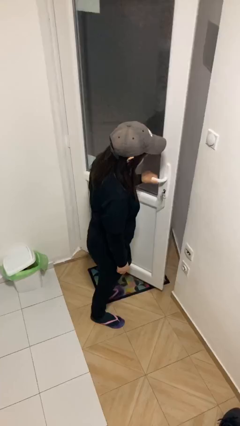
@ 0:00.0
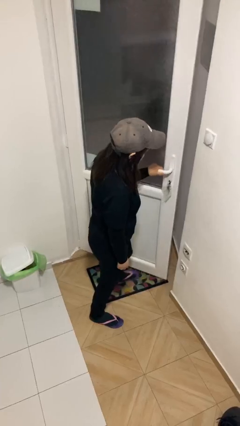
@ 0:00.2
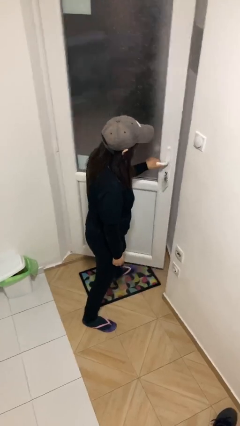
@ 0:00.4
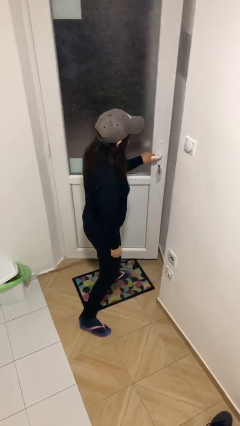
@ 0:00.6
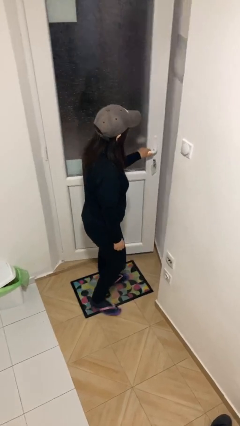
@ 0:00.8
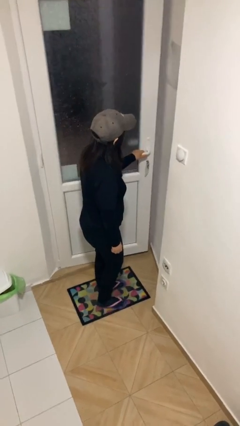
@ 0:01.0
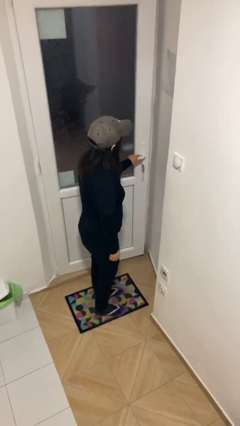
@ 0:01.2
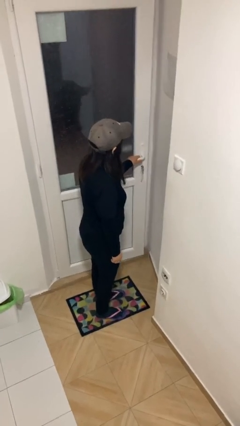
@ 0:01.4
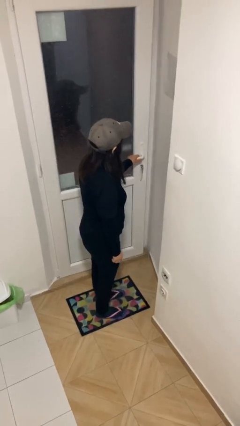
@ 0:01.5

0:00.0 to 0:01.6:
person closes facility door

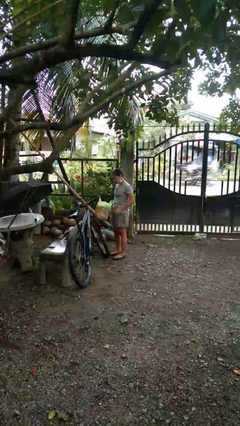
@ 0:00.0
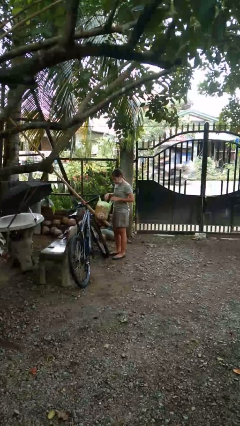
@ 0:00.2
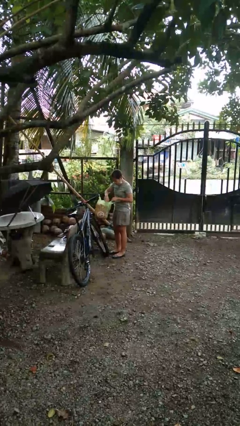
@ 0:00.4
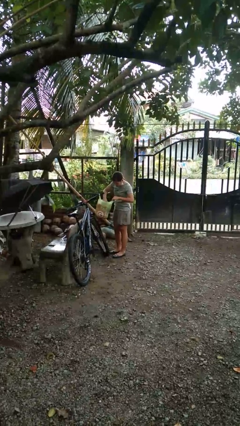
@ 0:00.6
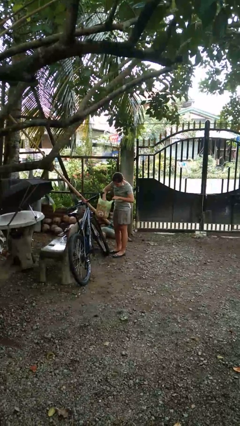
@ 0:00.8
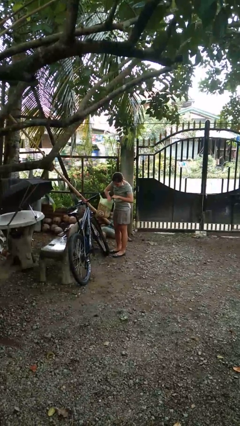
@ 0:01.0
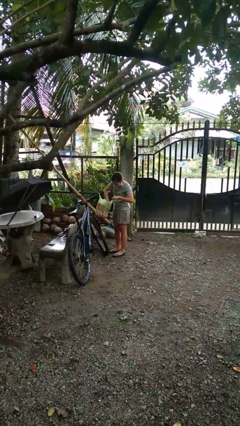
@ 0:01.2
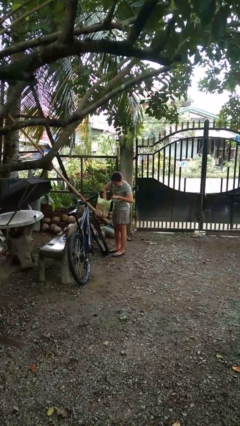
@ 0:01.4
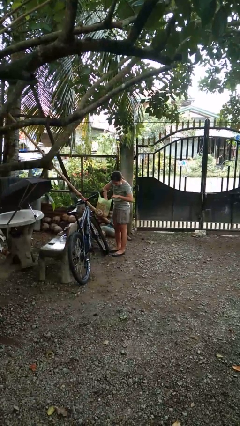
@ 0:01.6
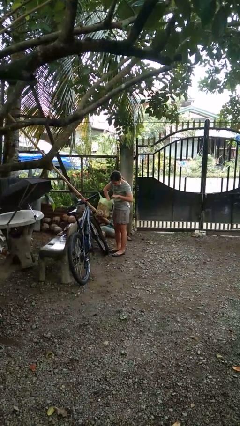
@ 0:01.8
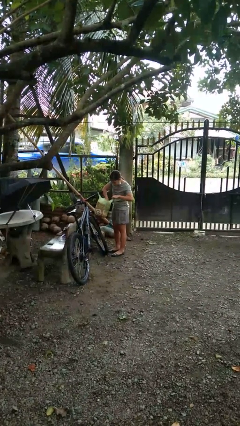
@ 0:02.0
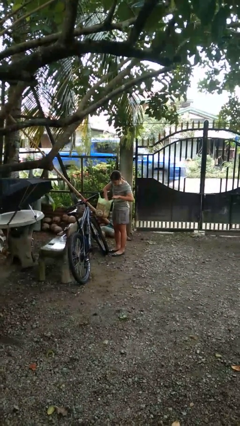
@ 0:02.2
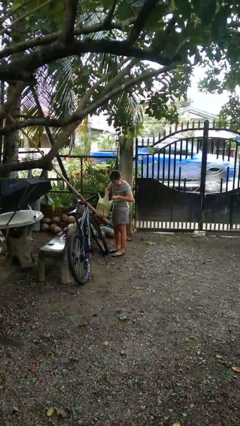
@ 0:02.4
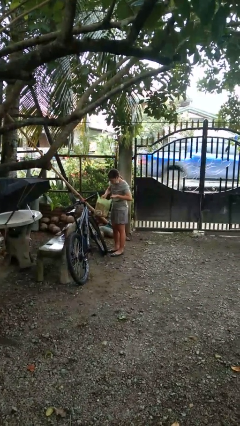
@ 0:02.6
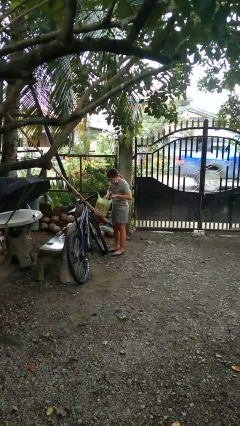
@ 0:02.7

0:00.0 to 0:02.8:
person searches in bag

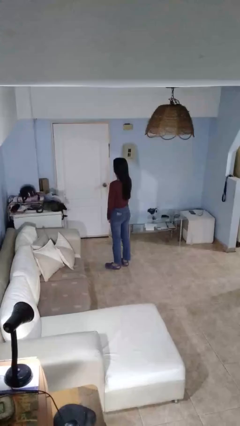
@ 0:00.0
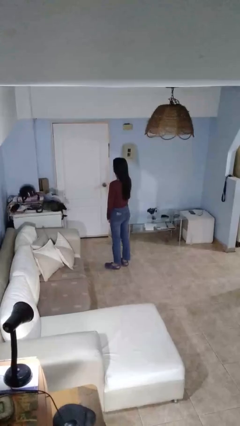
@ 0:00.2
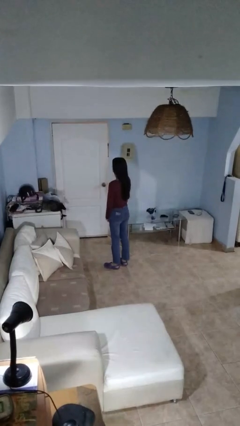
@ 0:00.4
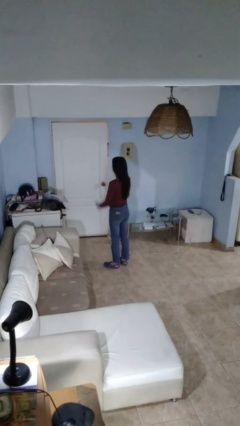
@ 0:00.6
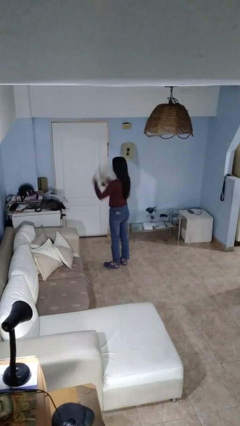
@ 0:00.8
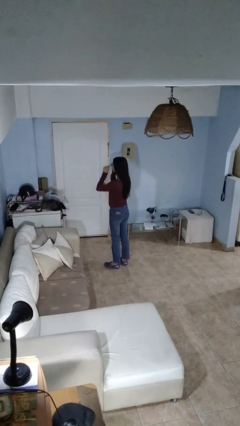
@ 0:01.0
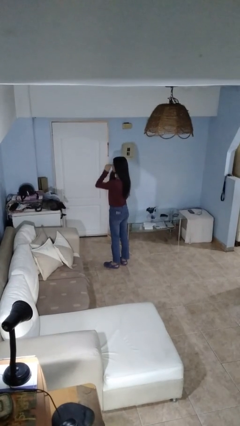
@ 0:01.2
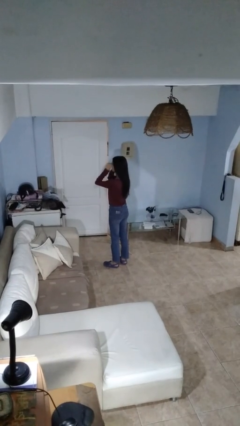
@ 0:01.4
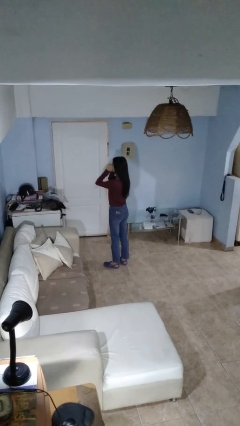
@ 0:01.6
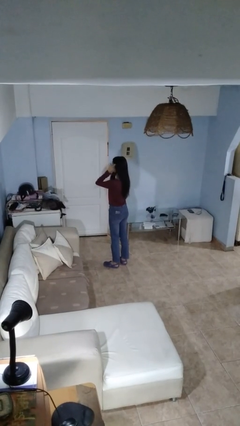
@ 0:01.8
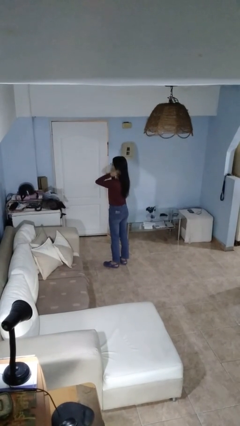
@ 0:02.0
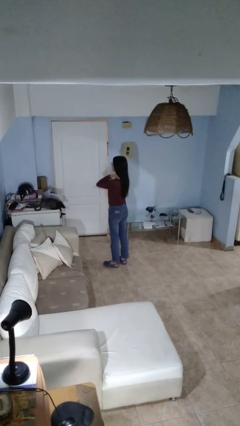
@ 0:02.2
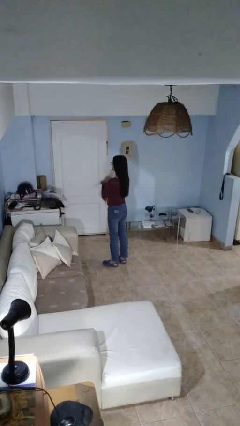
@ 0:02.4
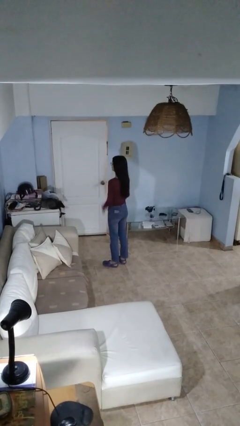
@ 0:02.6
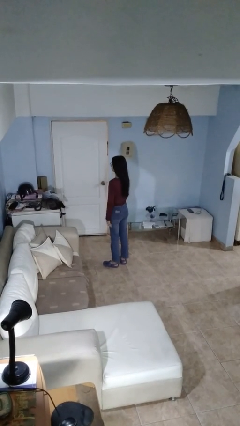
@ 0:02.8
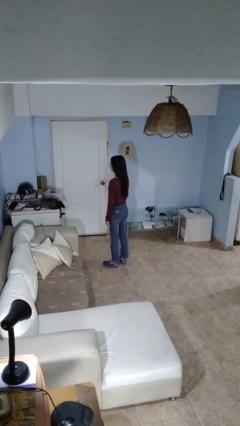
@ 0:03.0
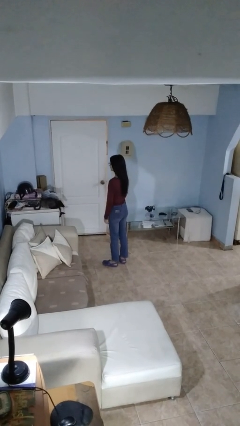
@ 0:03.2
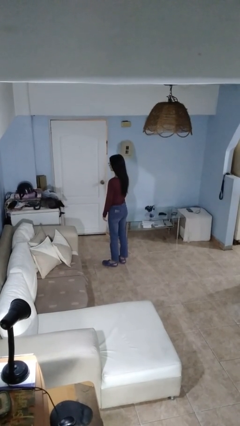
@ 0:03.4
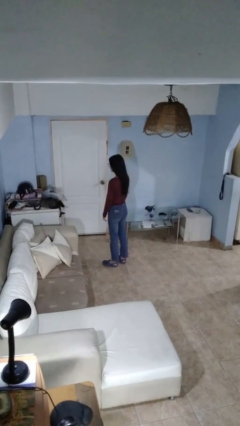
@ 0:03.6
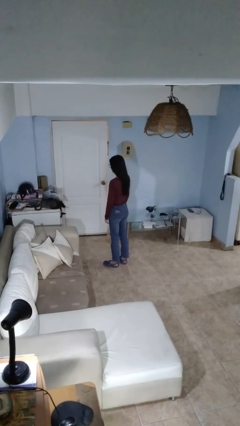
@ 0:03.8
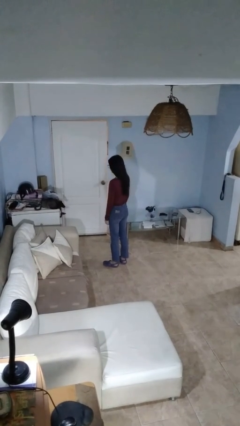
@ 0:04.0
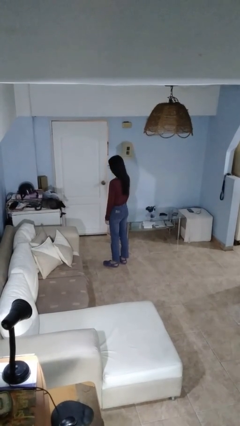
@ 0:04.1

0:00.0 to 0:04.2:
person puts on glasses

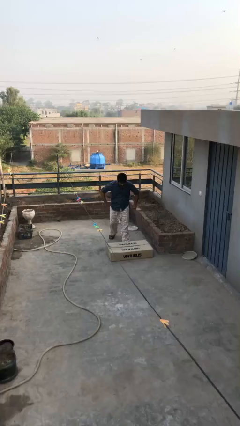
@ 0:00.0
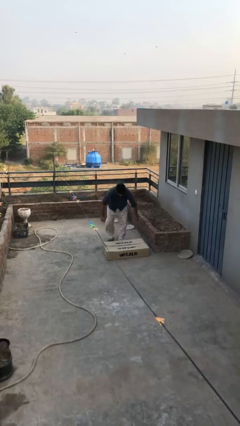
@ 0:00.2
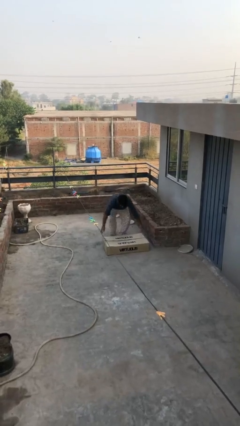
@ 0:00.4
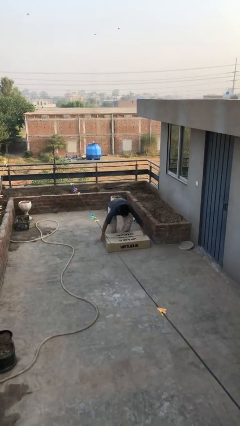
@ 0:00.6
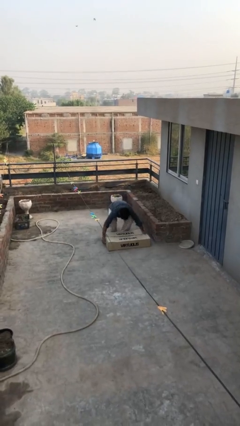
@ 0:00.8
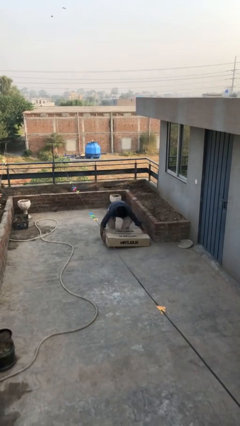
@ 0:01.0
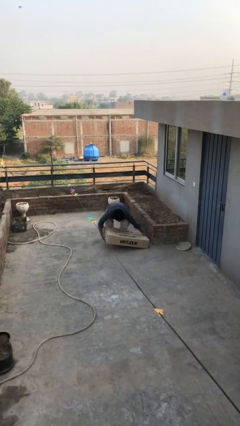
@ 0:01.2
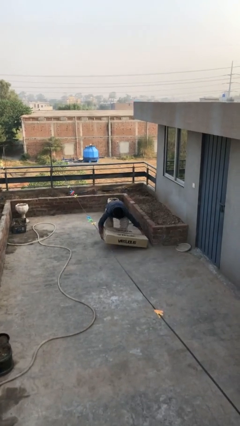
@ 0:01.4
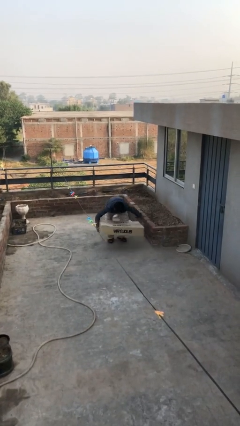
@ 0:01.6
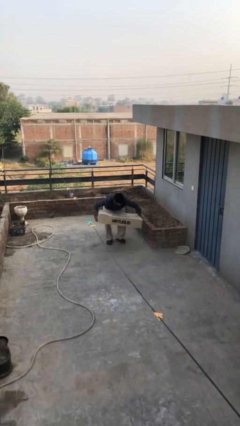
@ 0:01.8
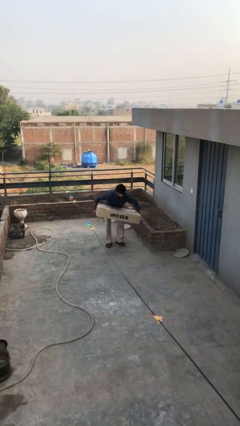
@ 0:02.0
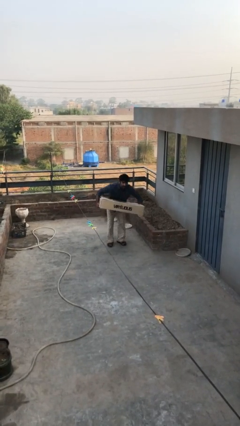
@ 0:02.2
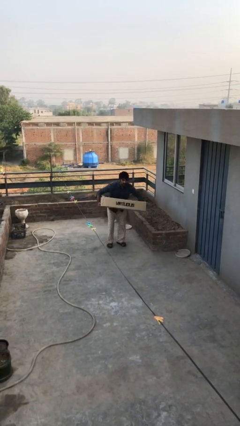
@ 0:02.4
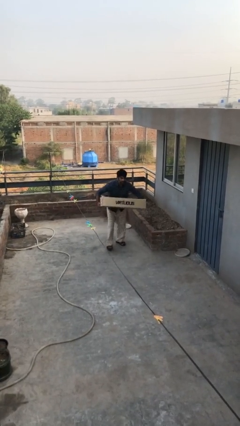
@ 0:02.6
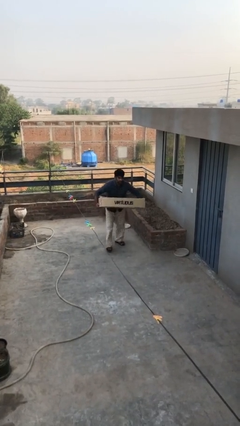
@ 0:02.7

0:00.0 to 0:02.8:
person picks up object from floor

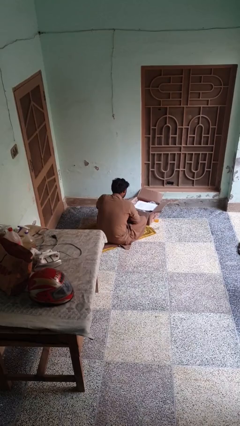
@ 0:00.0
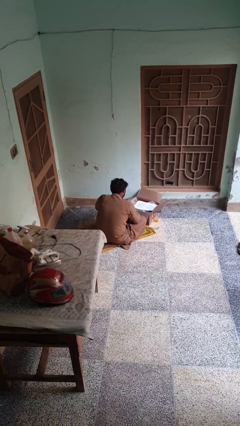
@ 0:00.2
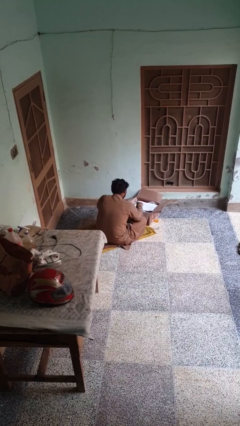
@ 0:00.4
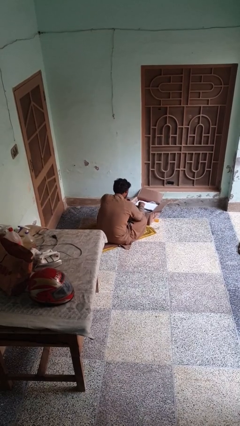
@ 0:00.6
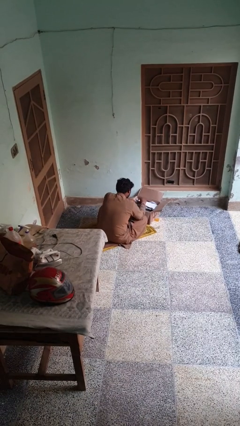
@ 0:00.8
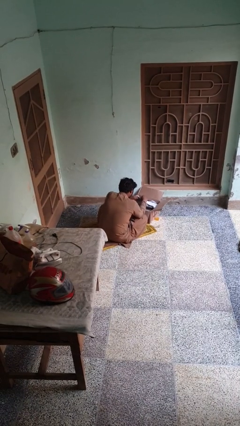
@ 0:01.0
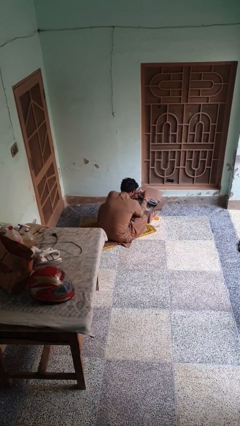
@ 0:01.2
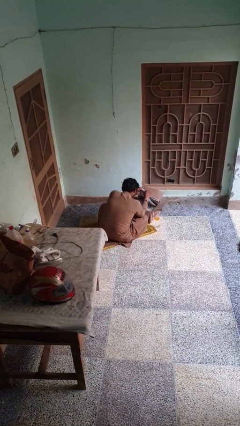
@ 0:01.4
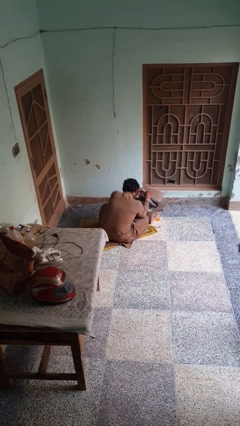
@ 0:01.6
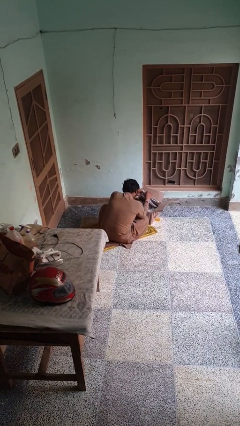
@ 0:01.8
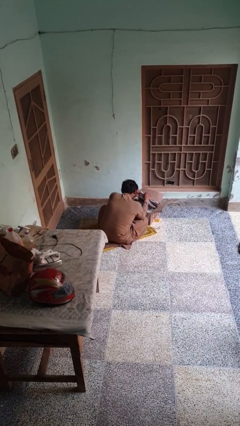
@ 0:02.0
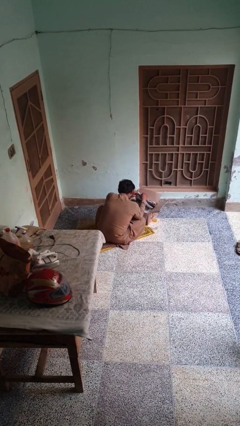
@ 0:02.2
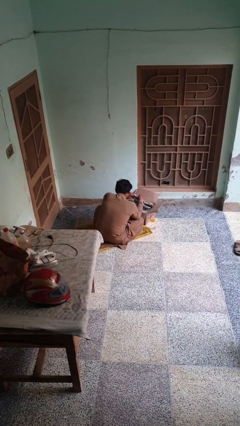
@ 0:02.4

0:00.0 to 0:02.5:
person searches in box

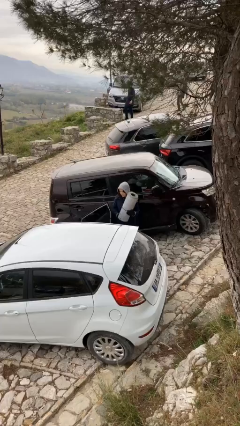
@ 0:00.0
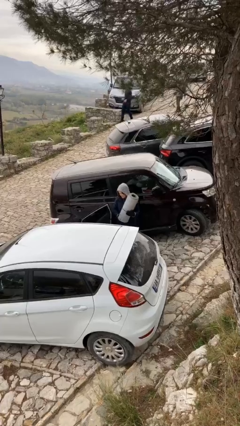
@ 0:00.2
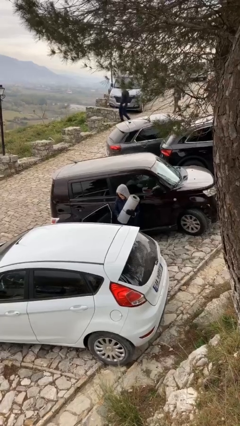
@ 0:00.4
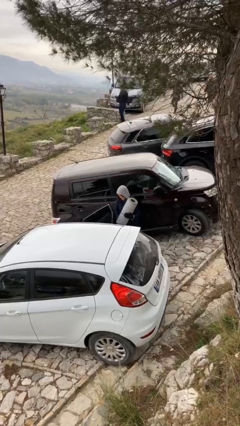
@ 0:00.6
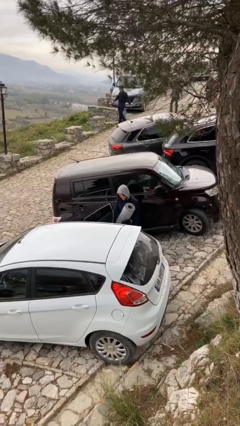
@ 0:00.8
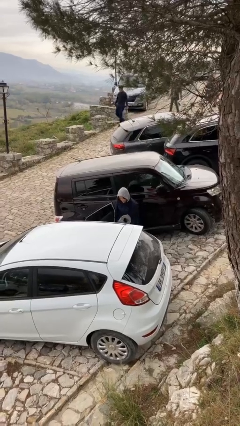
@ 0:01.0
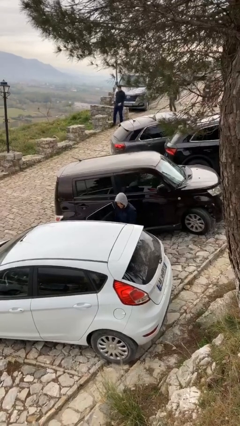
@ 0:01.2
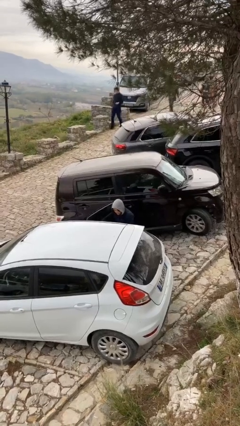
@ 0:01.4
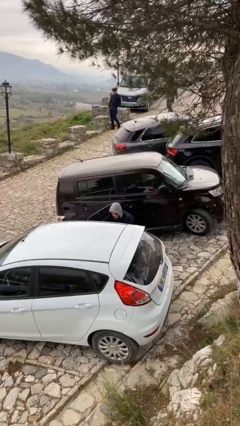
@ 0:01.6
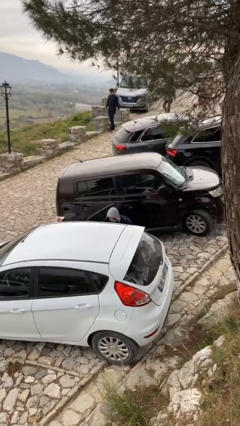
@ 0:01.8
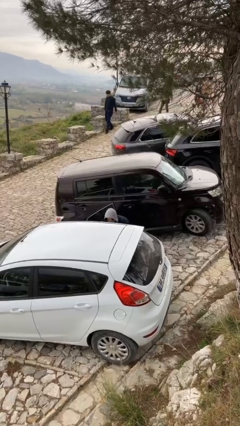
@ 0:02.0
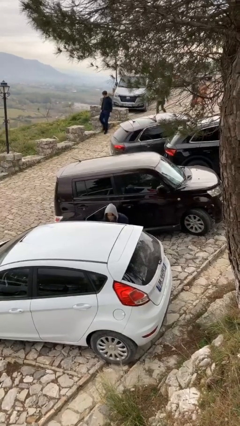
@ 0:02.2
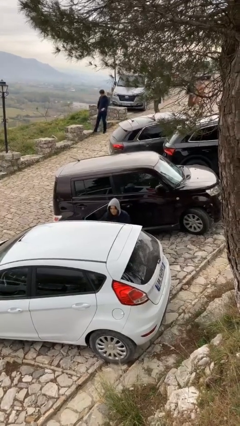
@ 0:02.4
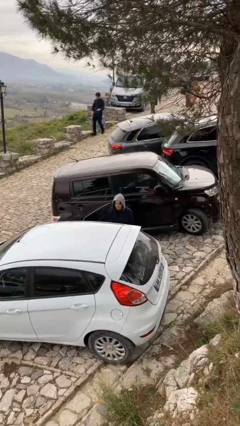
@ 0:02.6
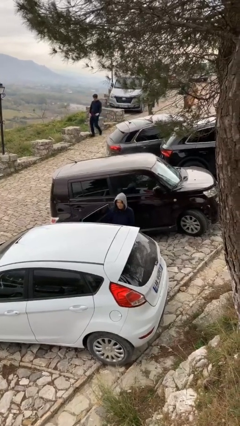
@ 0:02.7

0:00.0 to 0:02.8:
person loads car

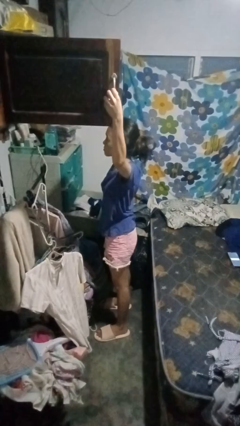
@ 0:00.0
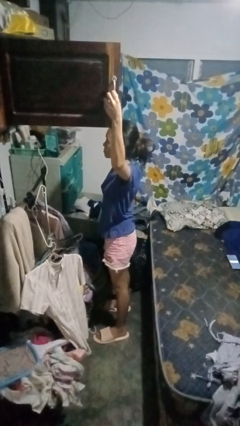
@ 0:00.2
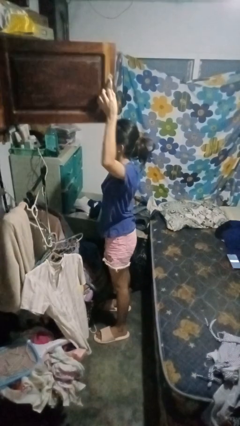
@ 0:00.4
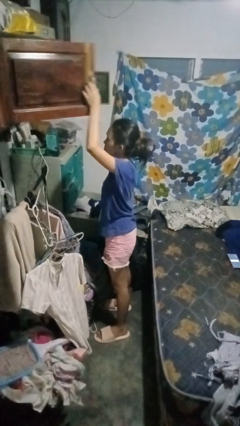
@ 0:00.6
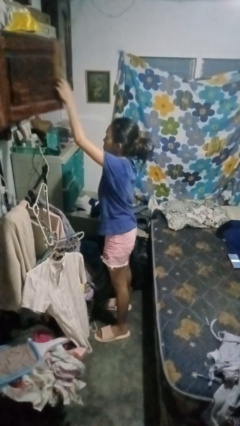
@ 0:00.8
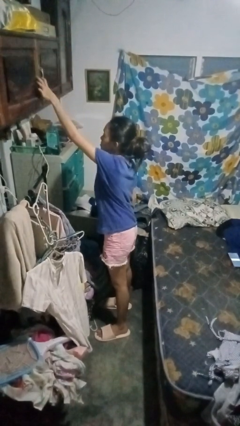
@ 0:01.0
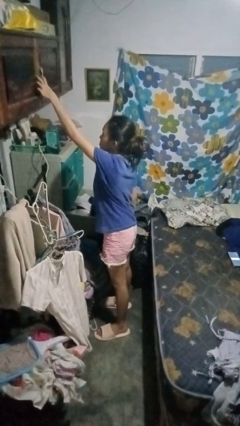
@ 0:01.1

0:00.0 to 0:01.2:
person closes closet door
